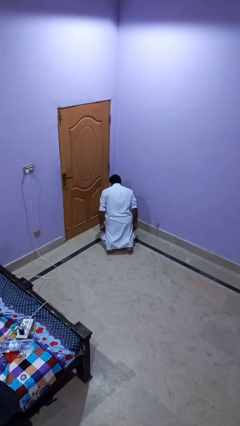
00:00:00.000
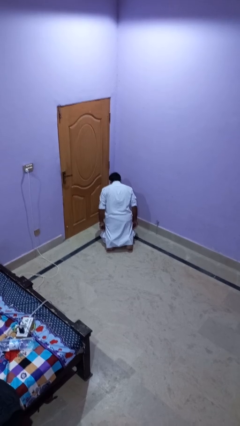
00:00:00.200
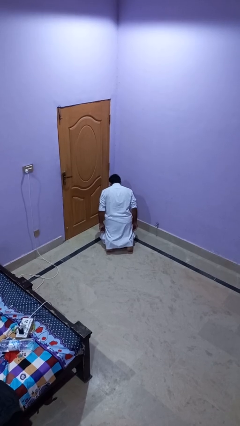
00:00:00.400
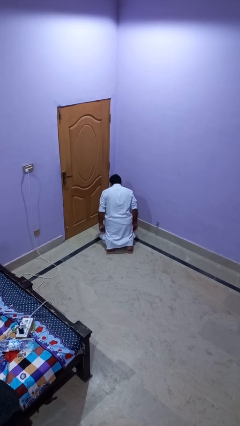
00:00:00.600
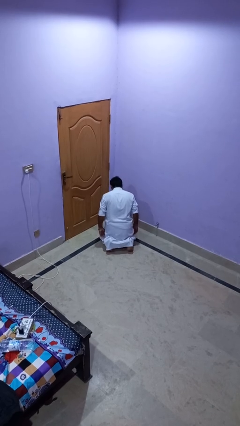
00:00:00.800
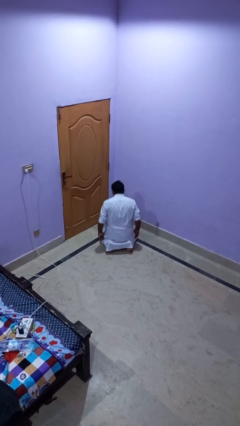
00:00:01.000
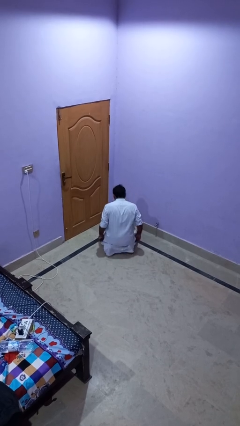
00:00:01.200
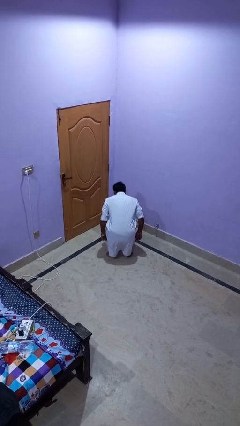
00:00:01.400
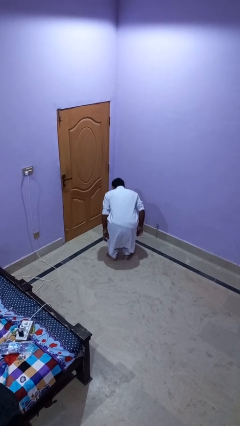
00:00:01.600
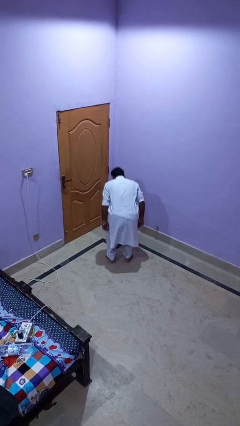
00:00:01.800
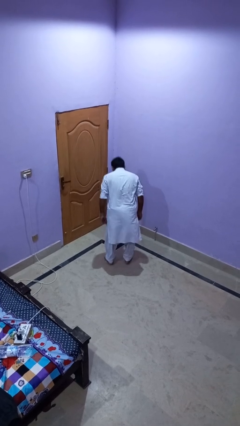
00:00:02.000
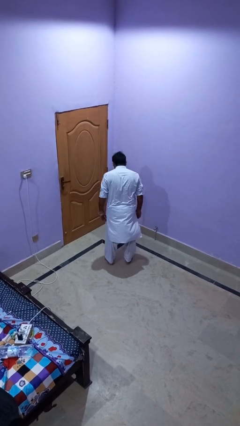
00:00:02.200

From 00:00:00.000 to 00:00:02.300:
person stands up from floor

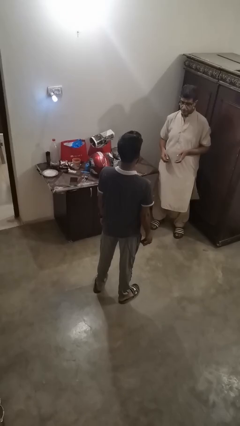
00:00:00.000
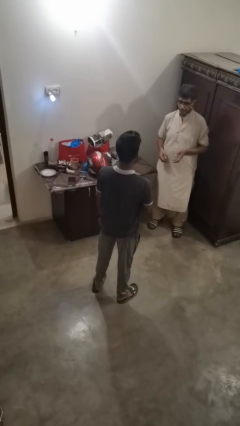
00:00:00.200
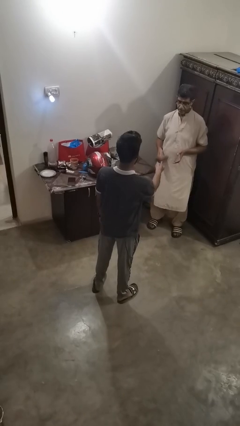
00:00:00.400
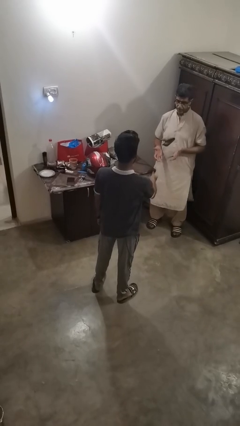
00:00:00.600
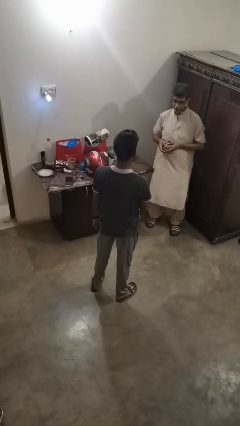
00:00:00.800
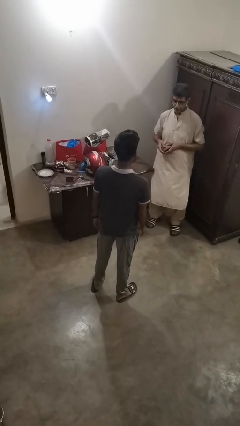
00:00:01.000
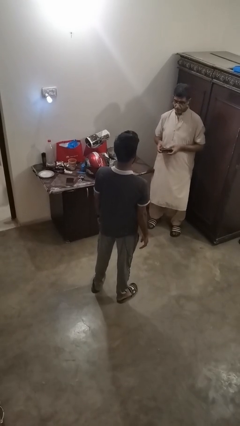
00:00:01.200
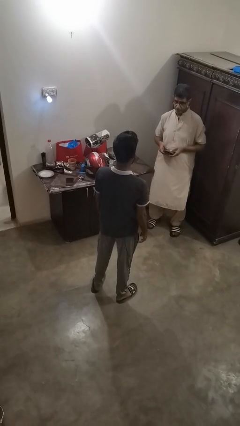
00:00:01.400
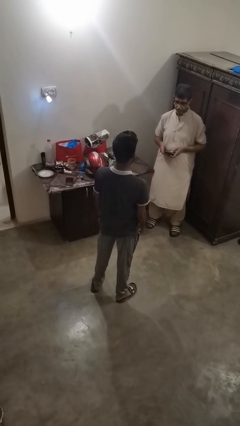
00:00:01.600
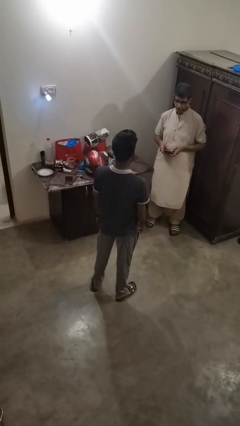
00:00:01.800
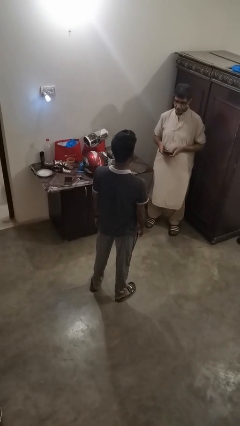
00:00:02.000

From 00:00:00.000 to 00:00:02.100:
person throws object to person

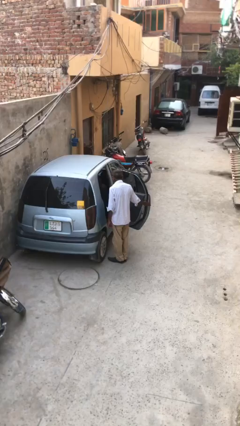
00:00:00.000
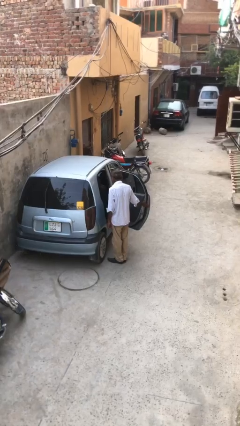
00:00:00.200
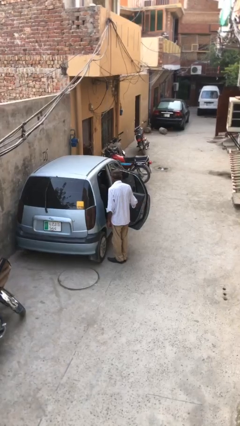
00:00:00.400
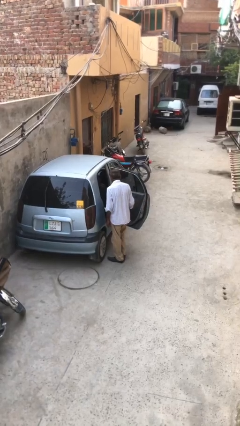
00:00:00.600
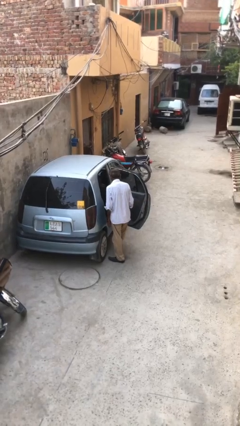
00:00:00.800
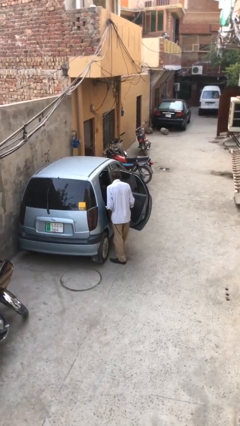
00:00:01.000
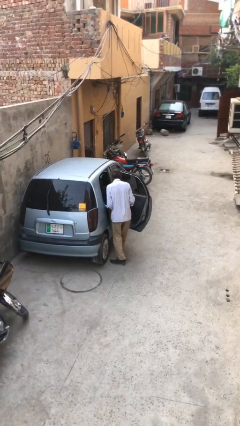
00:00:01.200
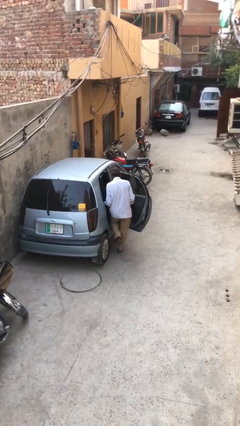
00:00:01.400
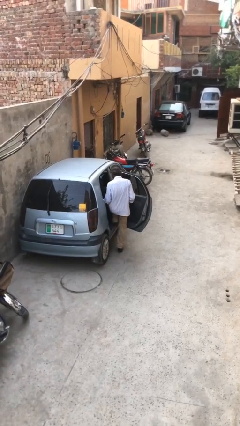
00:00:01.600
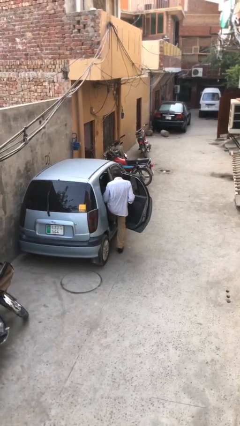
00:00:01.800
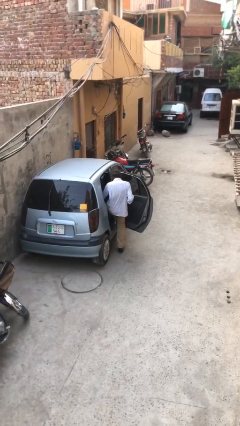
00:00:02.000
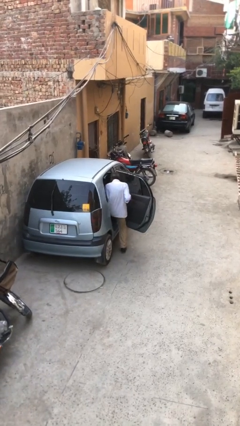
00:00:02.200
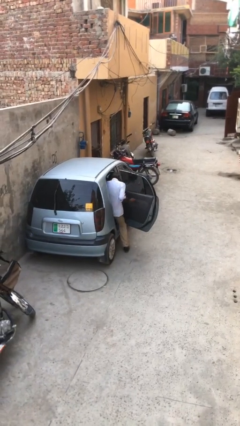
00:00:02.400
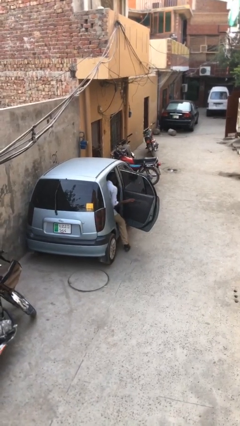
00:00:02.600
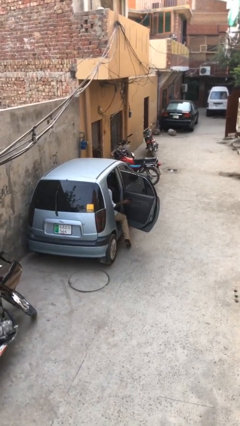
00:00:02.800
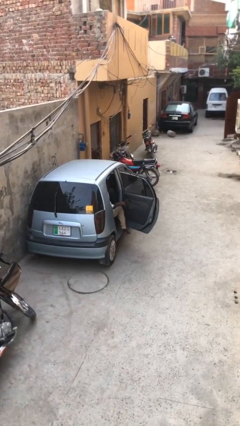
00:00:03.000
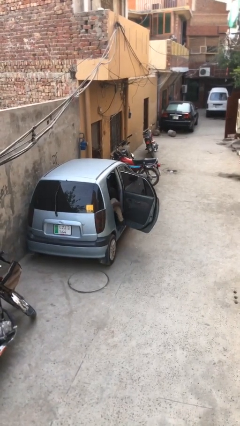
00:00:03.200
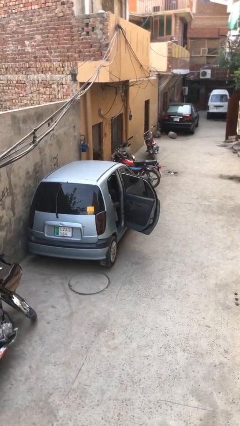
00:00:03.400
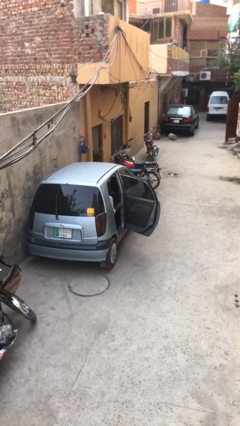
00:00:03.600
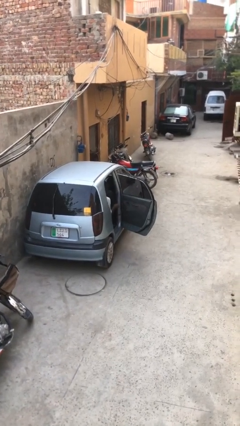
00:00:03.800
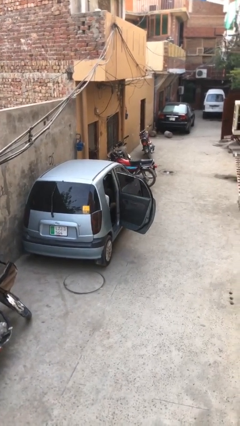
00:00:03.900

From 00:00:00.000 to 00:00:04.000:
person enters car

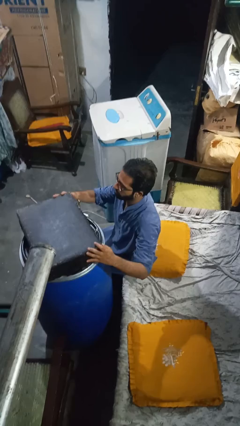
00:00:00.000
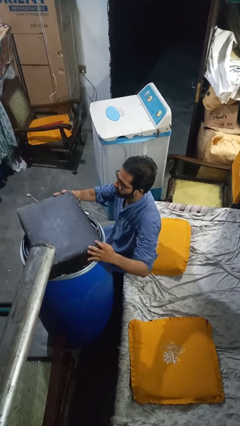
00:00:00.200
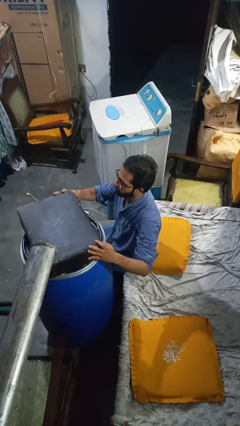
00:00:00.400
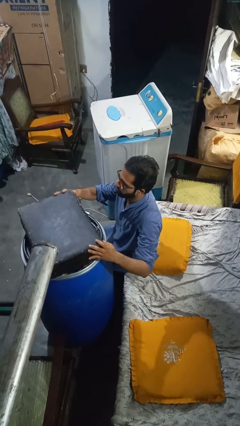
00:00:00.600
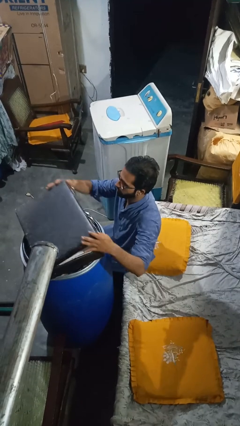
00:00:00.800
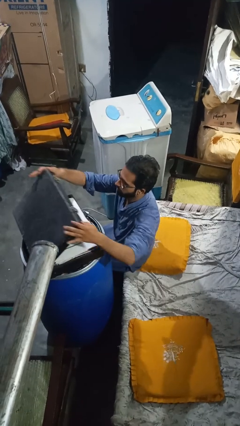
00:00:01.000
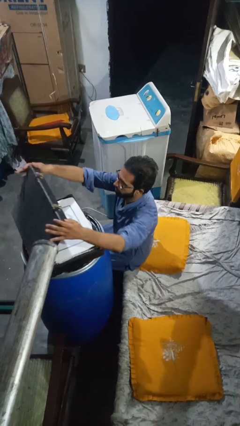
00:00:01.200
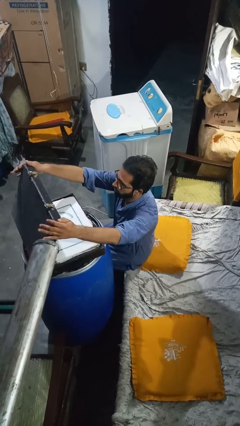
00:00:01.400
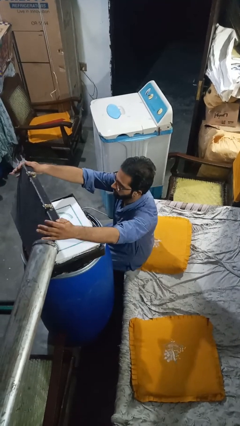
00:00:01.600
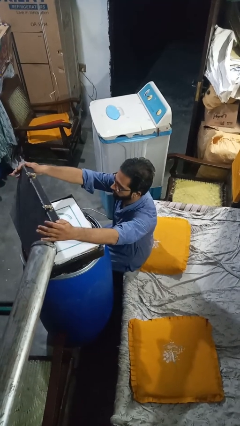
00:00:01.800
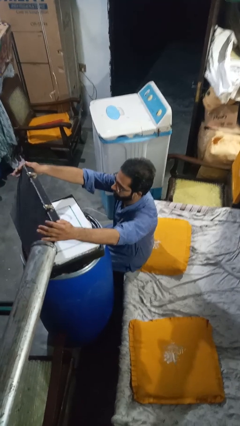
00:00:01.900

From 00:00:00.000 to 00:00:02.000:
person opens suitcase

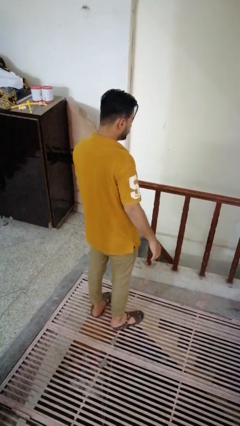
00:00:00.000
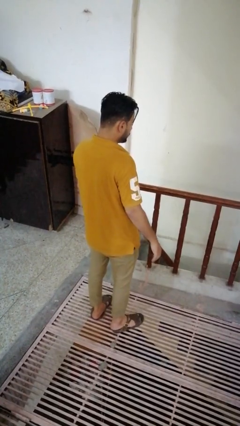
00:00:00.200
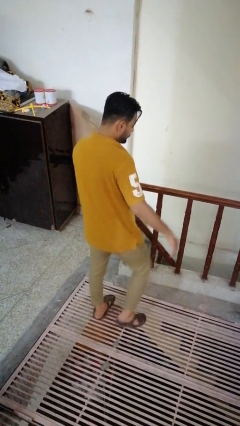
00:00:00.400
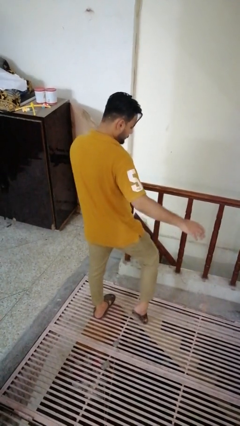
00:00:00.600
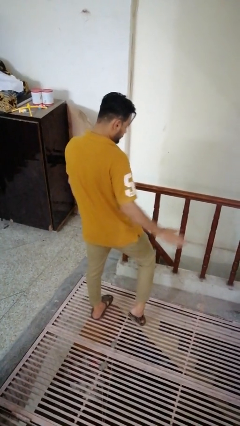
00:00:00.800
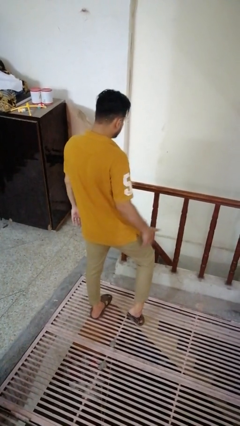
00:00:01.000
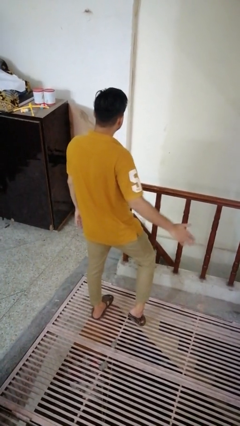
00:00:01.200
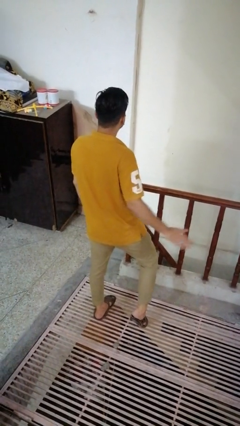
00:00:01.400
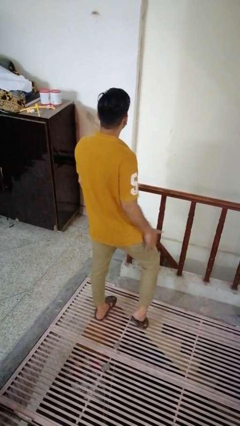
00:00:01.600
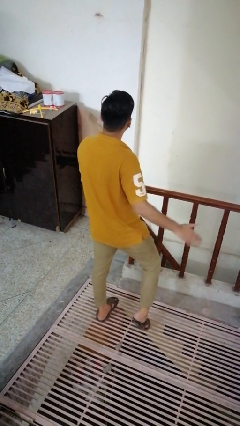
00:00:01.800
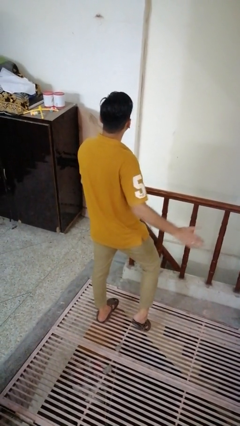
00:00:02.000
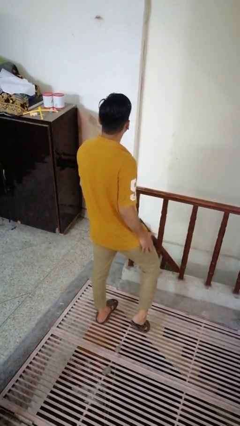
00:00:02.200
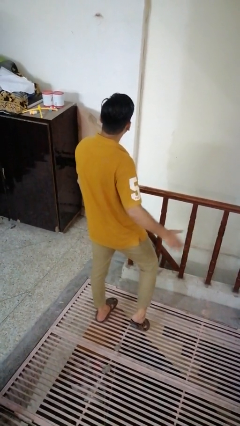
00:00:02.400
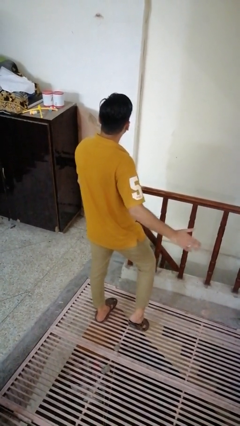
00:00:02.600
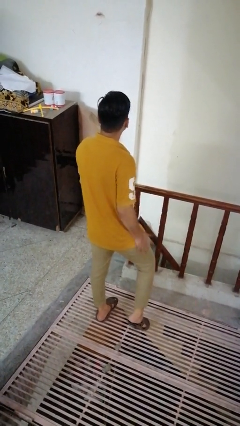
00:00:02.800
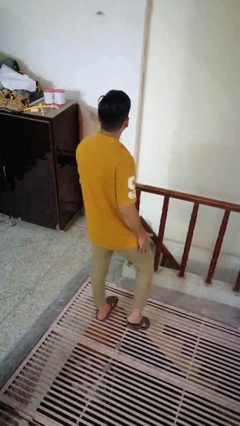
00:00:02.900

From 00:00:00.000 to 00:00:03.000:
person slaps hands on thighs

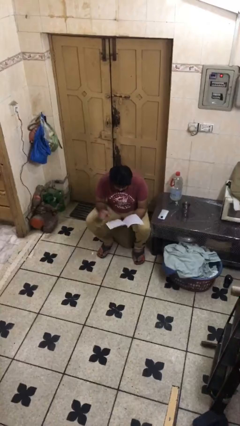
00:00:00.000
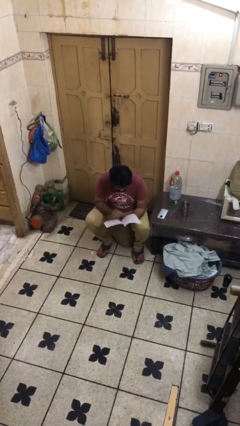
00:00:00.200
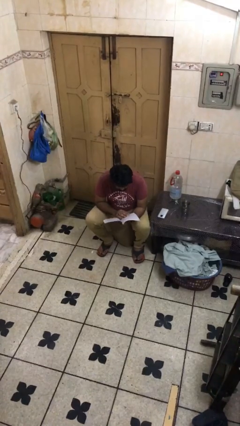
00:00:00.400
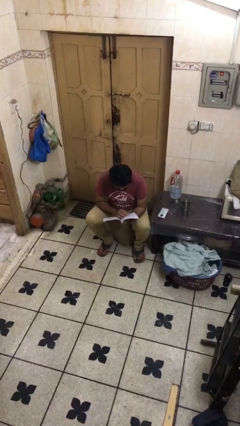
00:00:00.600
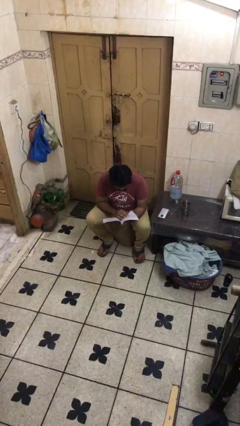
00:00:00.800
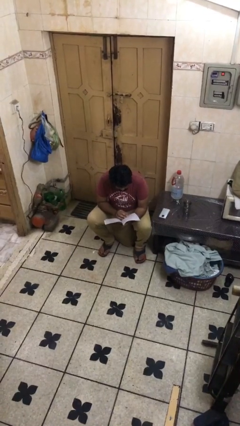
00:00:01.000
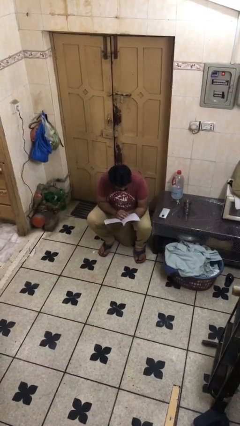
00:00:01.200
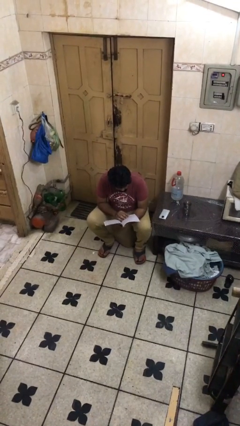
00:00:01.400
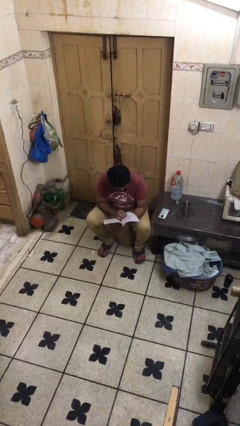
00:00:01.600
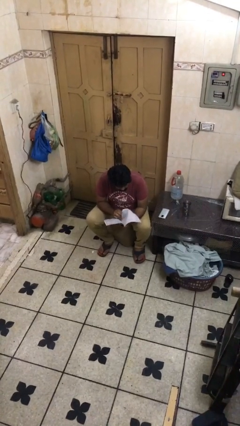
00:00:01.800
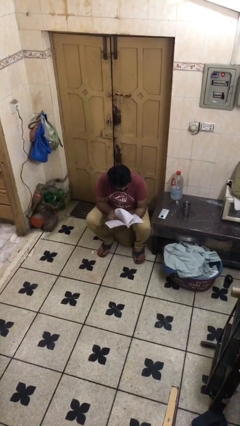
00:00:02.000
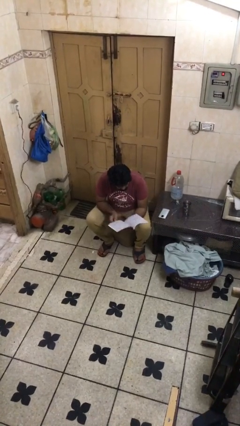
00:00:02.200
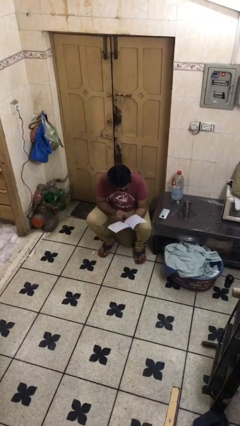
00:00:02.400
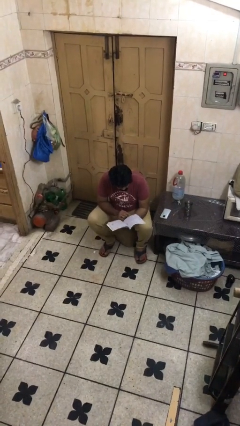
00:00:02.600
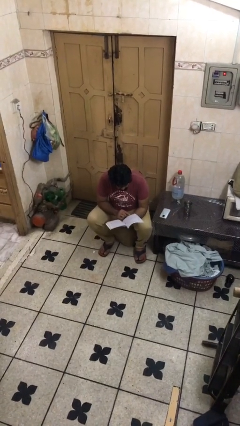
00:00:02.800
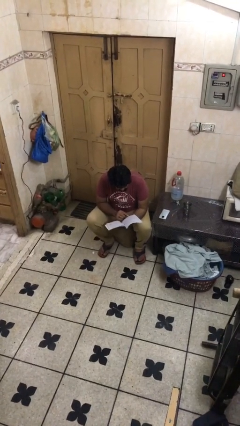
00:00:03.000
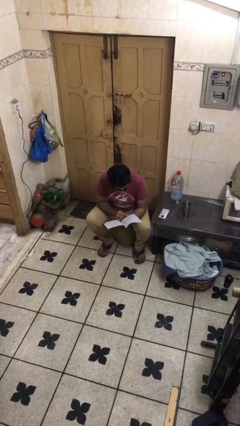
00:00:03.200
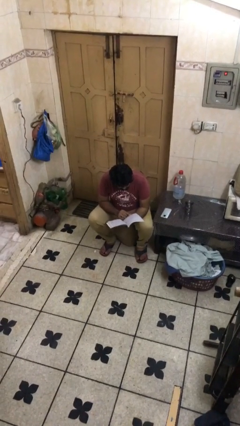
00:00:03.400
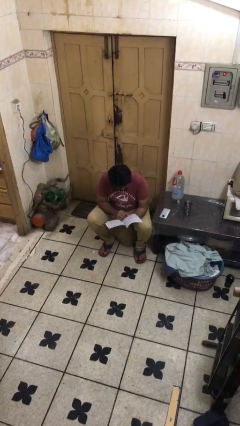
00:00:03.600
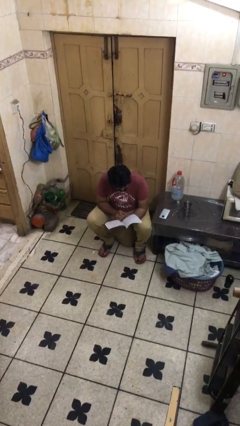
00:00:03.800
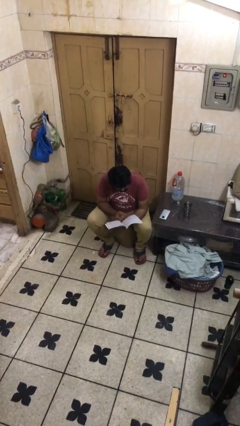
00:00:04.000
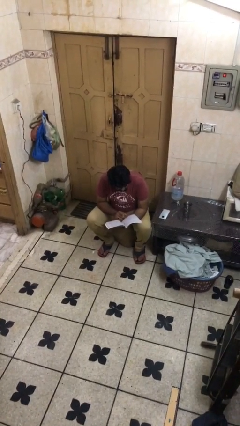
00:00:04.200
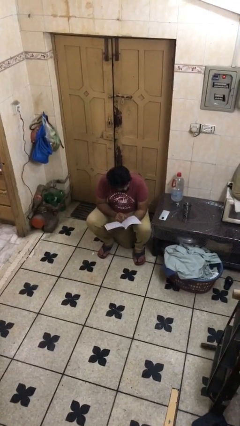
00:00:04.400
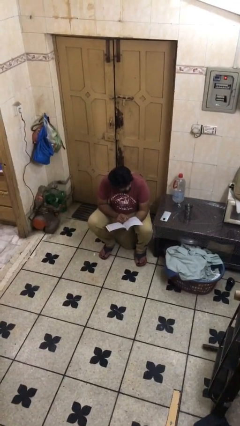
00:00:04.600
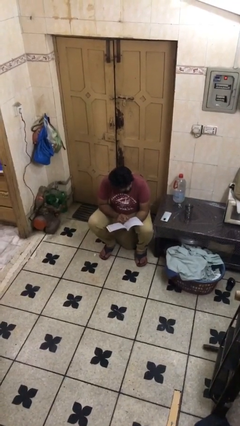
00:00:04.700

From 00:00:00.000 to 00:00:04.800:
person reads document
